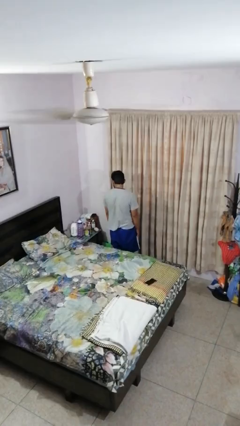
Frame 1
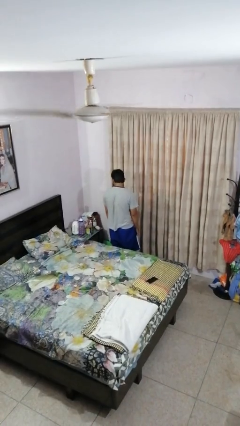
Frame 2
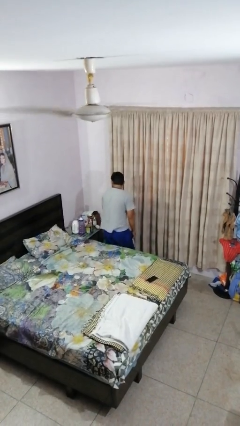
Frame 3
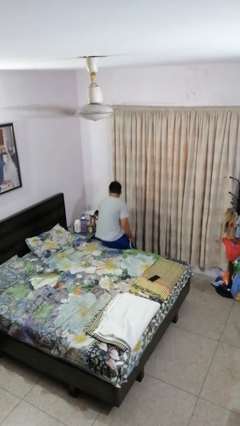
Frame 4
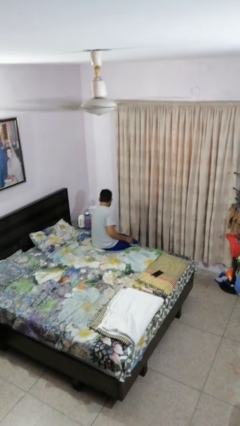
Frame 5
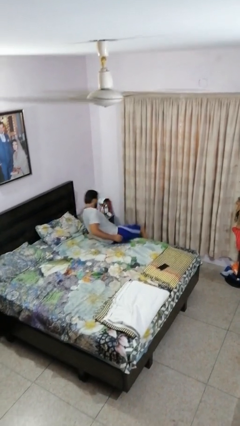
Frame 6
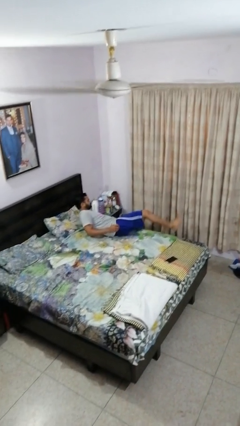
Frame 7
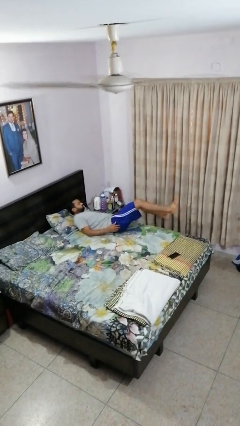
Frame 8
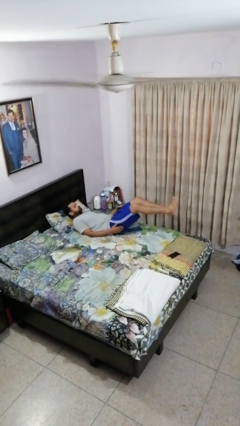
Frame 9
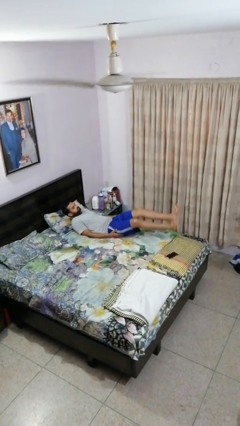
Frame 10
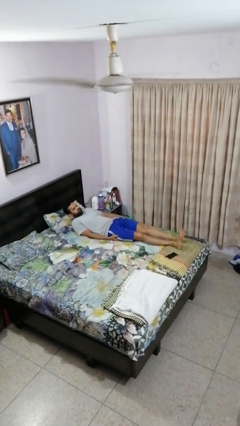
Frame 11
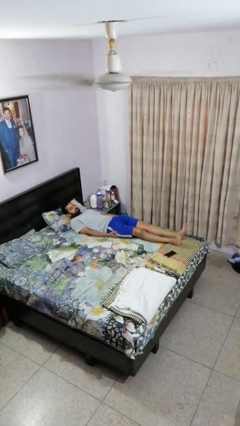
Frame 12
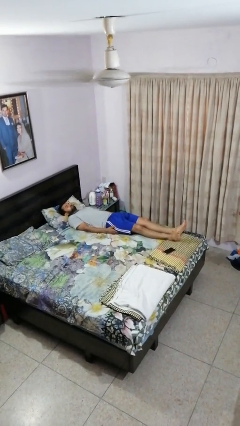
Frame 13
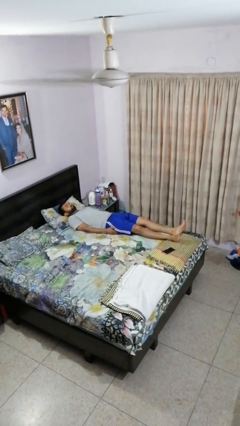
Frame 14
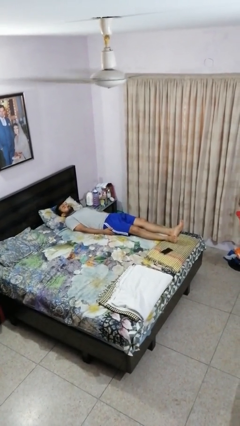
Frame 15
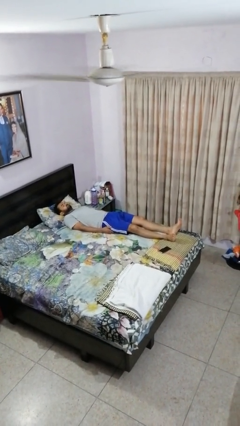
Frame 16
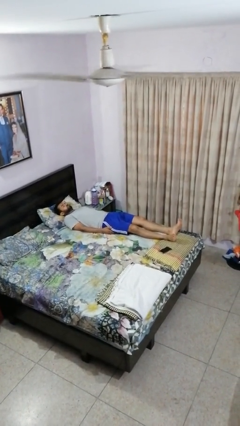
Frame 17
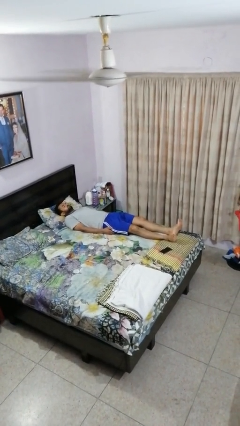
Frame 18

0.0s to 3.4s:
person lies down on bed

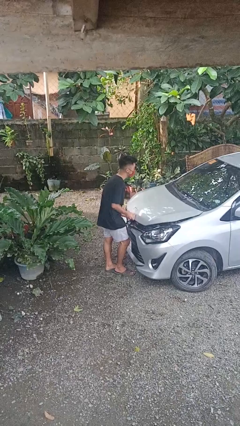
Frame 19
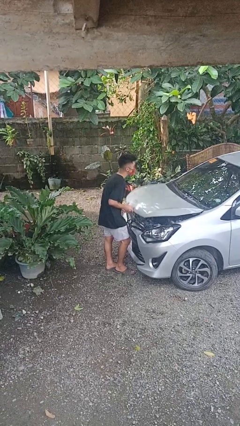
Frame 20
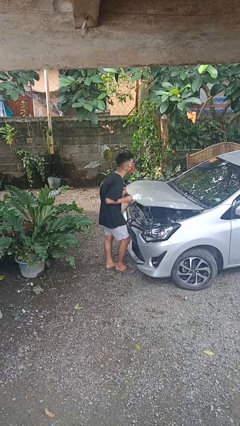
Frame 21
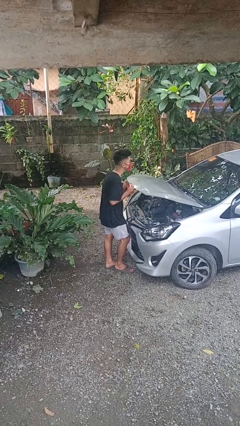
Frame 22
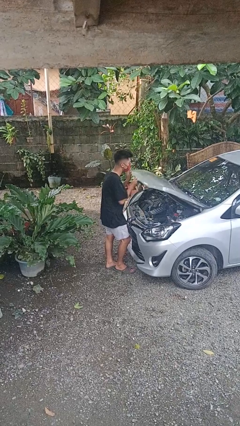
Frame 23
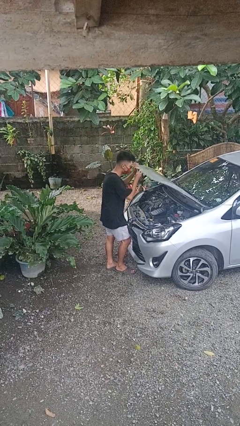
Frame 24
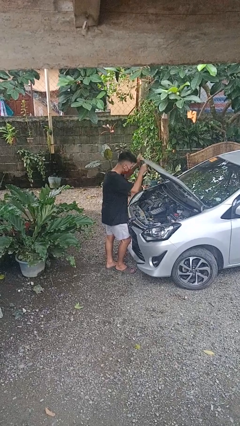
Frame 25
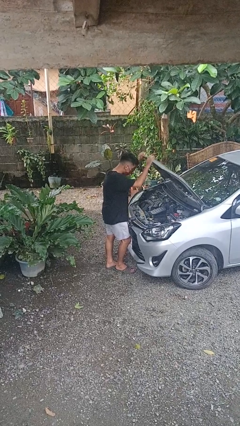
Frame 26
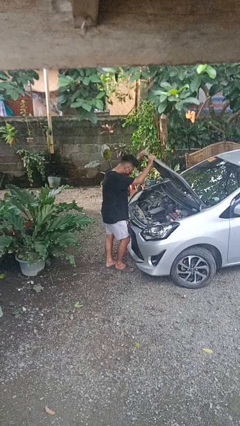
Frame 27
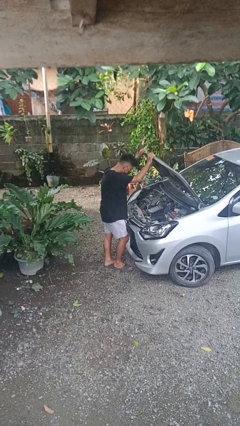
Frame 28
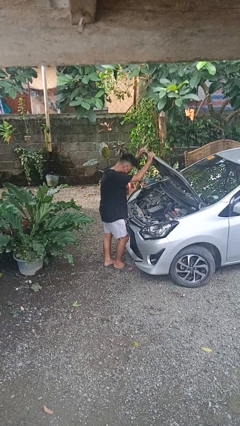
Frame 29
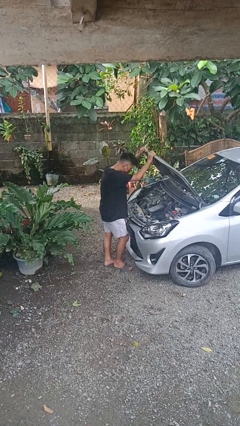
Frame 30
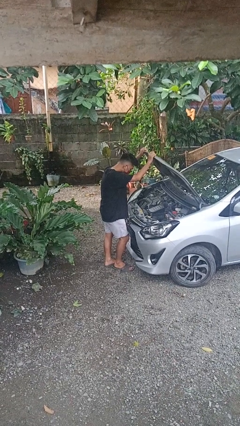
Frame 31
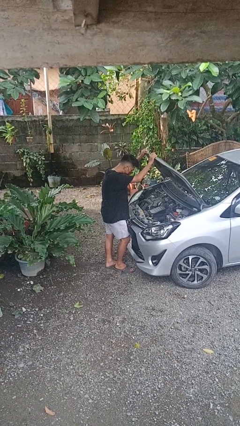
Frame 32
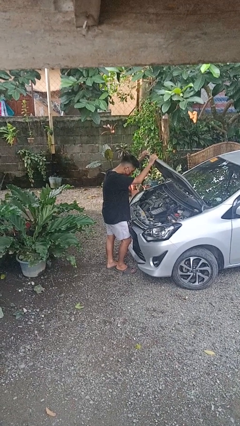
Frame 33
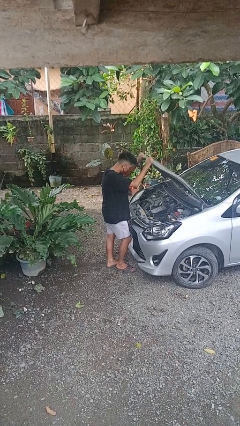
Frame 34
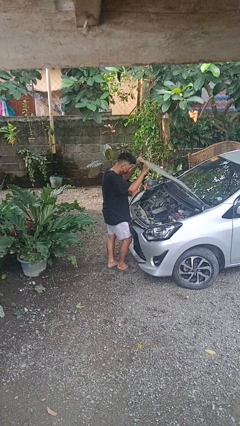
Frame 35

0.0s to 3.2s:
person opens car hood

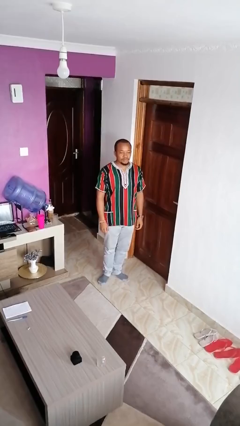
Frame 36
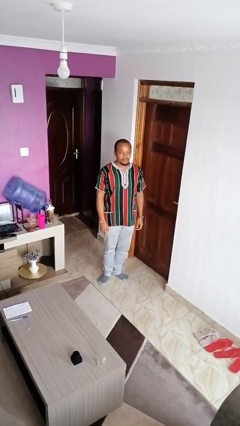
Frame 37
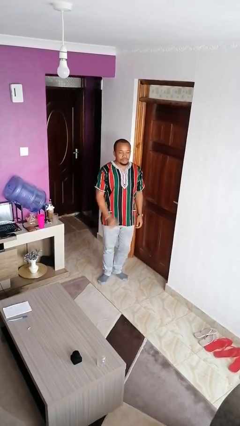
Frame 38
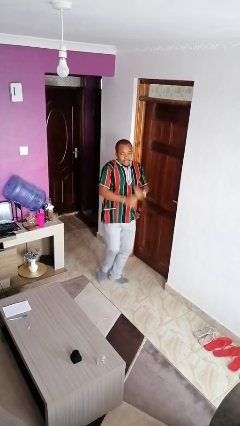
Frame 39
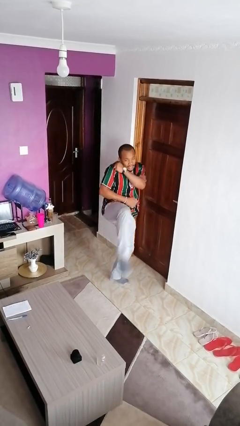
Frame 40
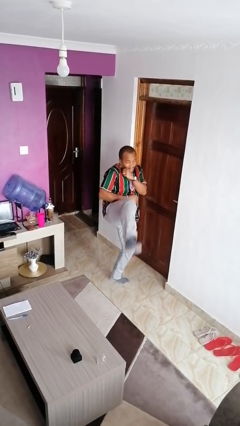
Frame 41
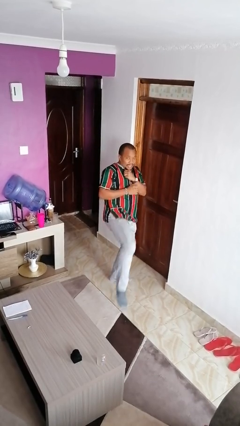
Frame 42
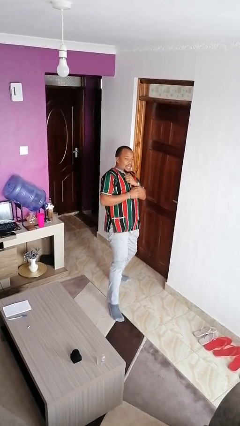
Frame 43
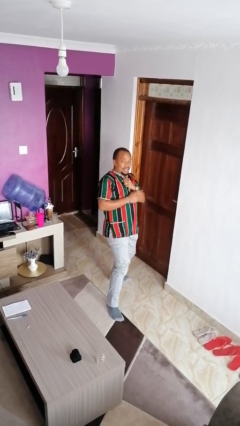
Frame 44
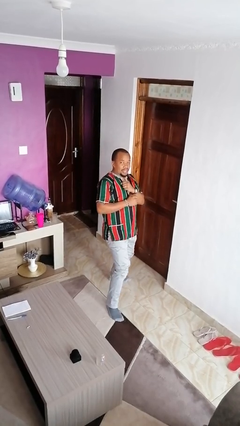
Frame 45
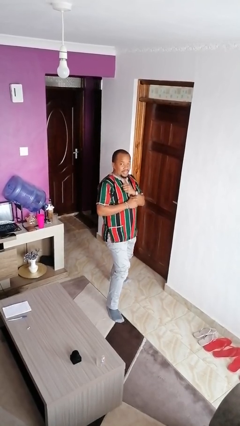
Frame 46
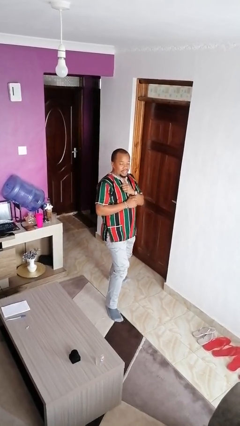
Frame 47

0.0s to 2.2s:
person karate kicks

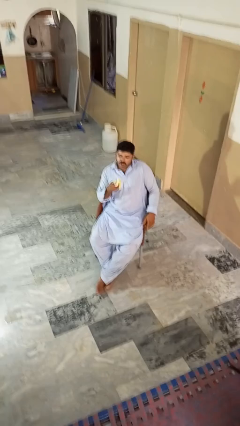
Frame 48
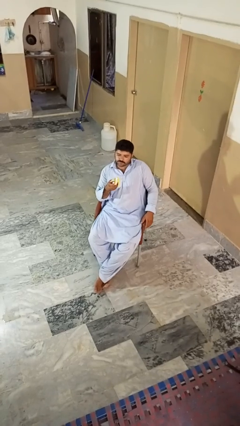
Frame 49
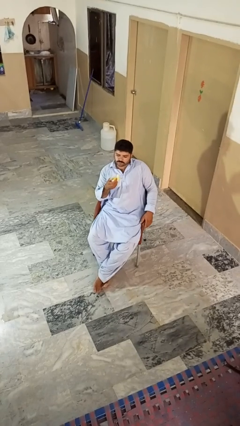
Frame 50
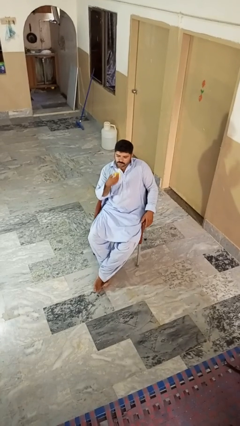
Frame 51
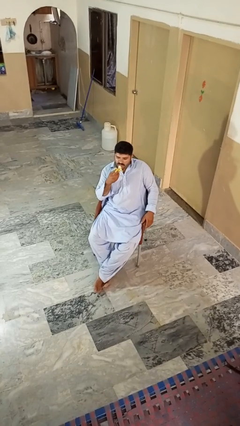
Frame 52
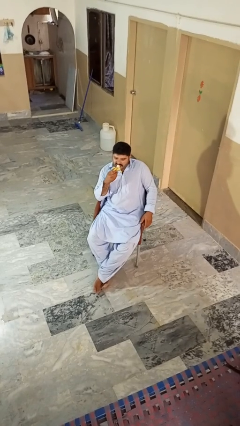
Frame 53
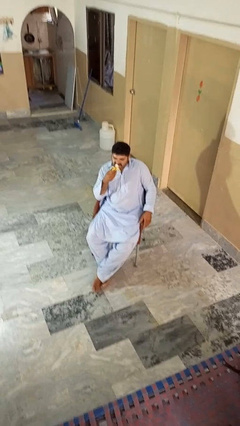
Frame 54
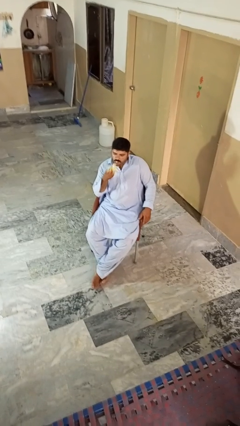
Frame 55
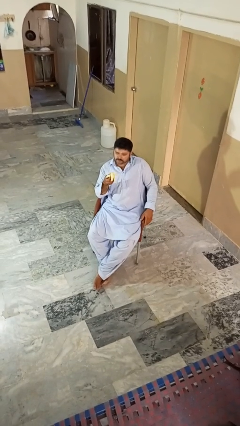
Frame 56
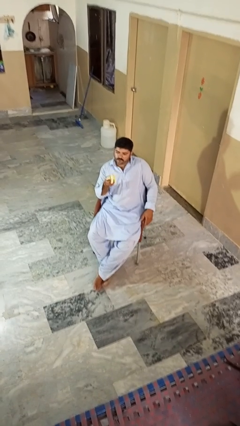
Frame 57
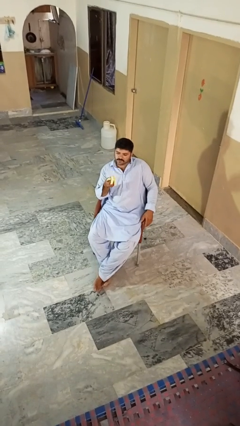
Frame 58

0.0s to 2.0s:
person eats banana

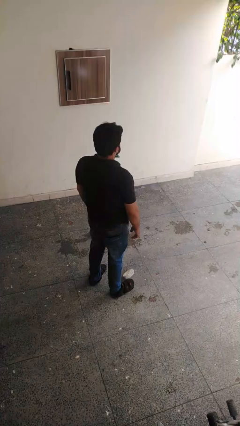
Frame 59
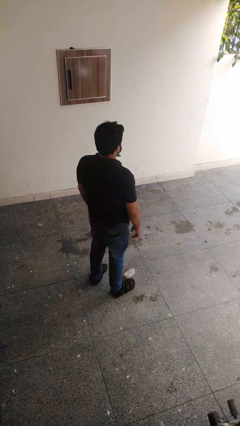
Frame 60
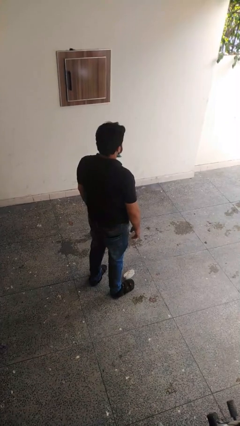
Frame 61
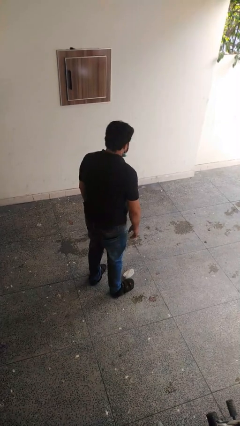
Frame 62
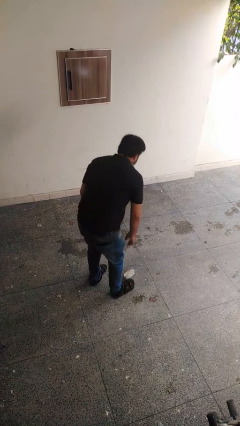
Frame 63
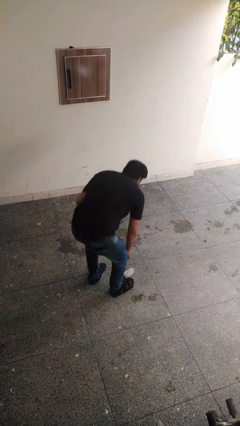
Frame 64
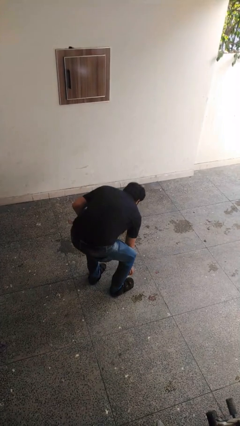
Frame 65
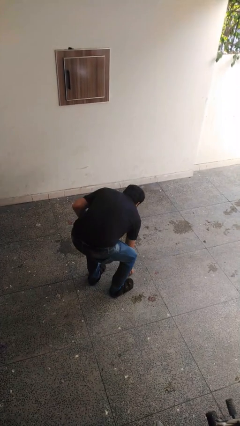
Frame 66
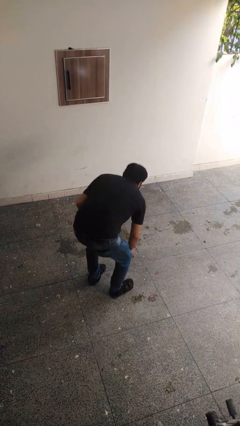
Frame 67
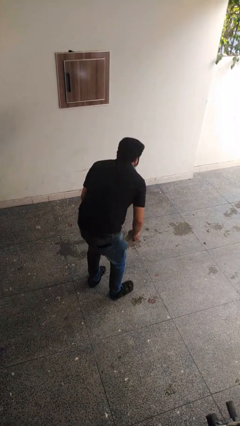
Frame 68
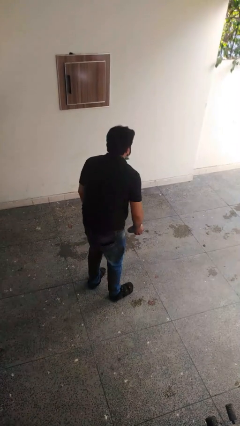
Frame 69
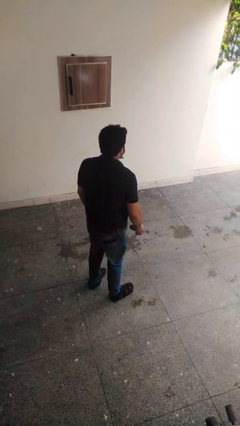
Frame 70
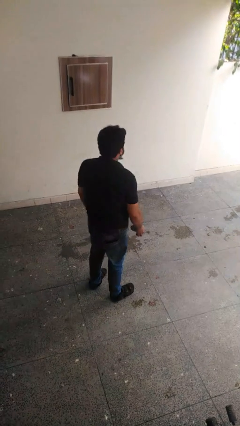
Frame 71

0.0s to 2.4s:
person picks up object from floor

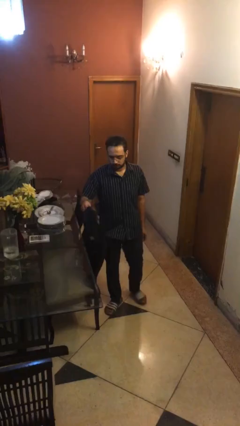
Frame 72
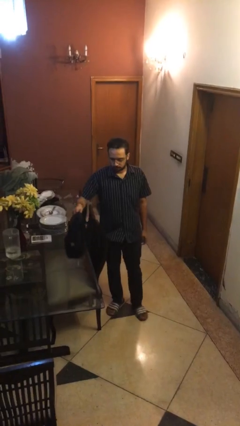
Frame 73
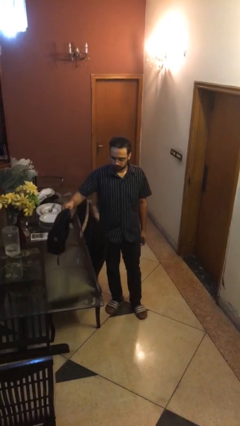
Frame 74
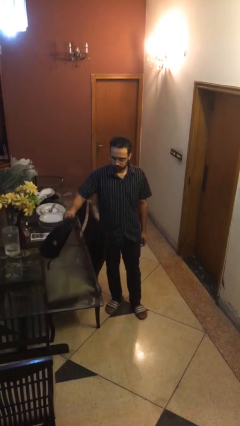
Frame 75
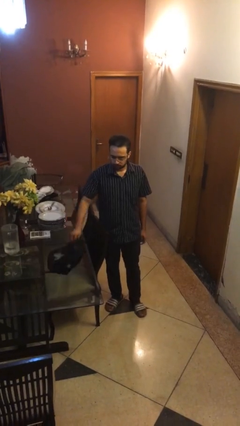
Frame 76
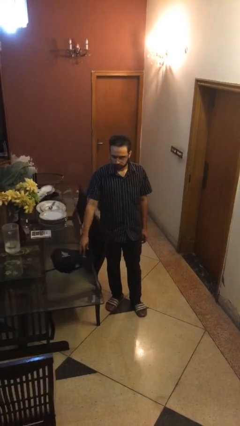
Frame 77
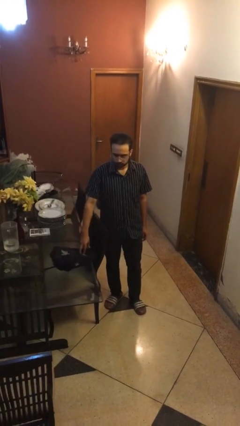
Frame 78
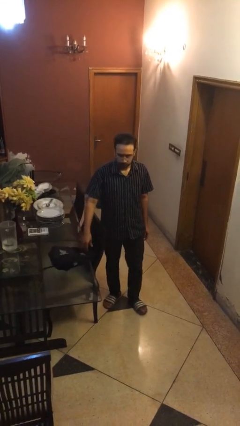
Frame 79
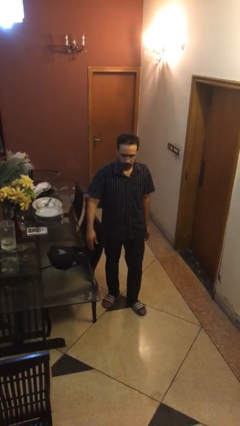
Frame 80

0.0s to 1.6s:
person puts down object on table

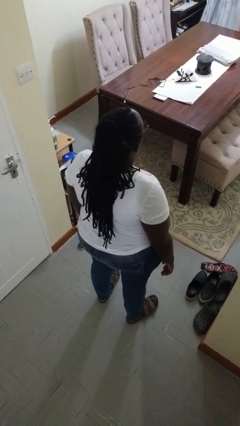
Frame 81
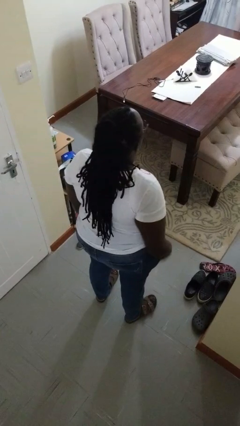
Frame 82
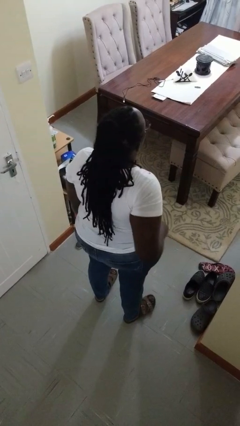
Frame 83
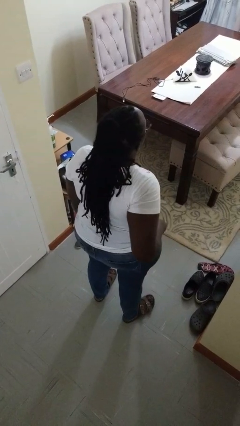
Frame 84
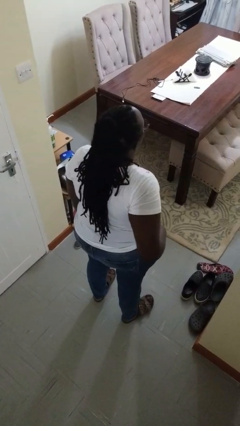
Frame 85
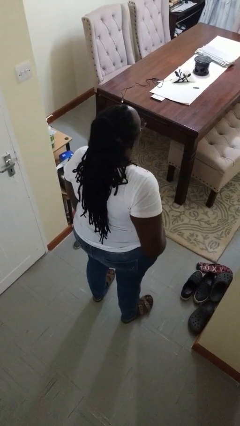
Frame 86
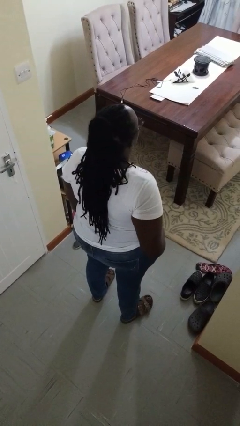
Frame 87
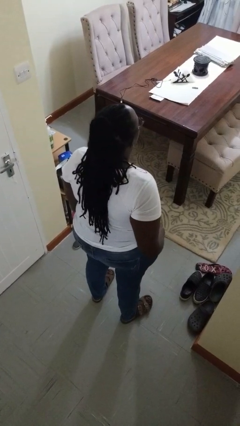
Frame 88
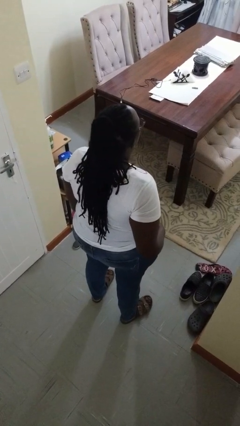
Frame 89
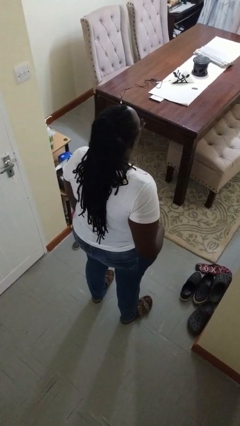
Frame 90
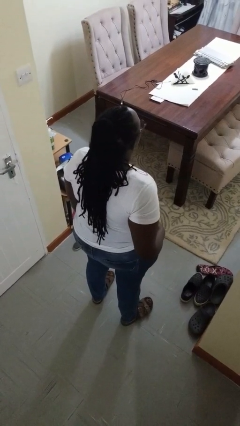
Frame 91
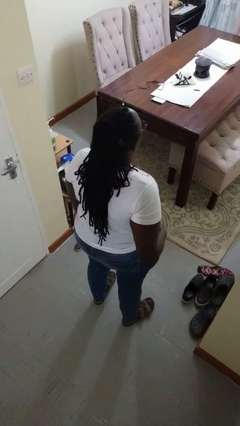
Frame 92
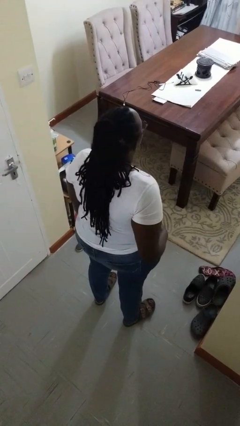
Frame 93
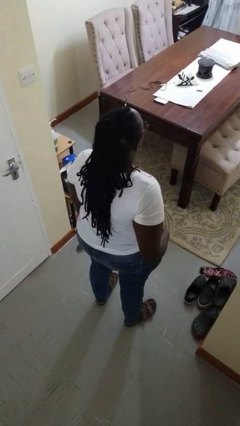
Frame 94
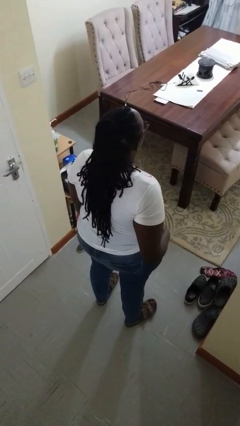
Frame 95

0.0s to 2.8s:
person puts hands in back pockets
